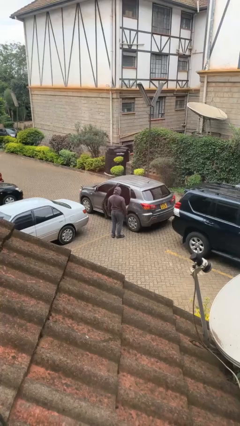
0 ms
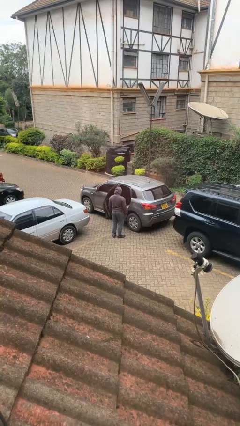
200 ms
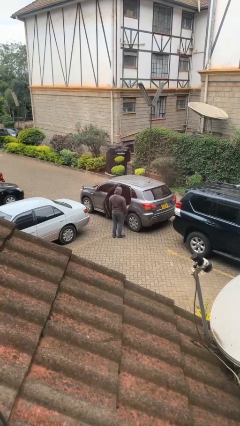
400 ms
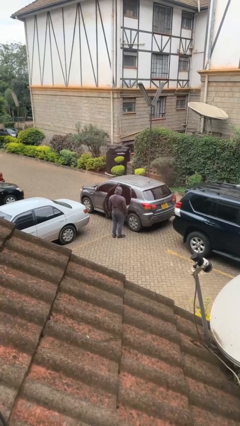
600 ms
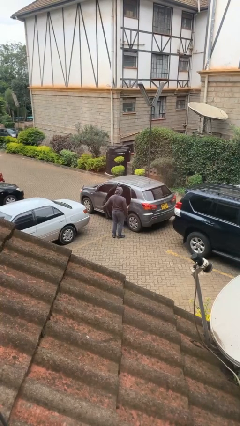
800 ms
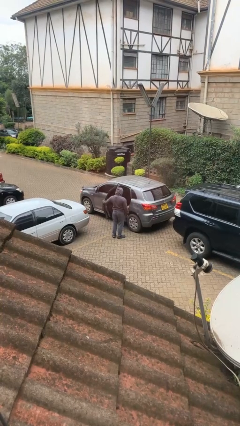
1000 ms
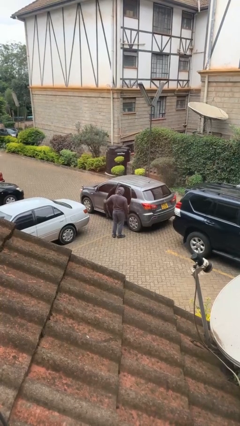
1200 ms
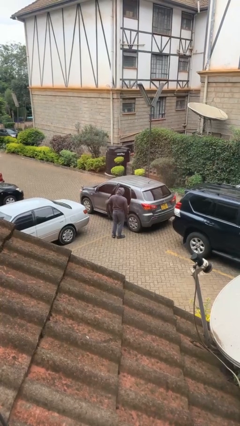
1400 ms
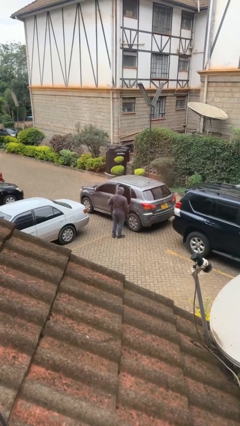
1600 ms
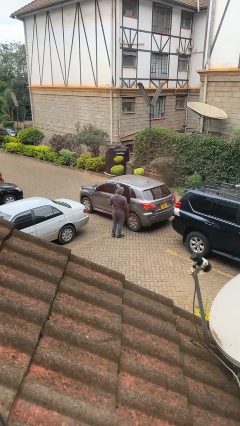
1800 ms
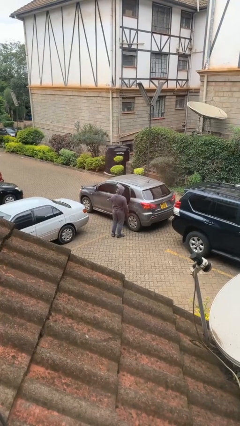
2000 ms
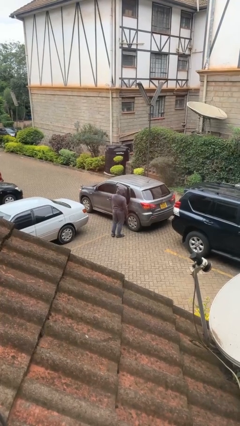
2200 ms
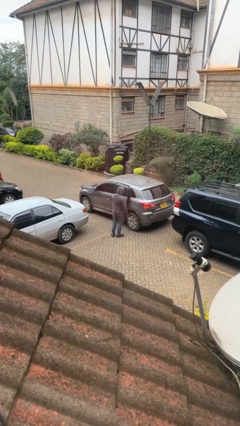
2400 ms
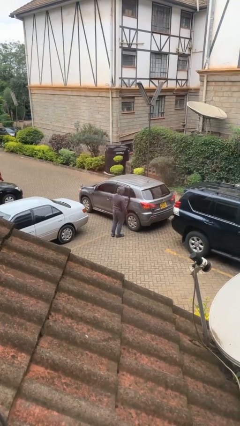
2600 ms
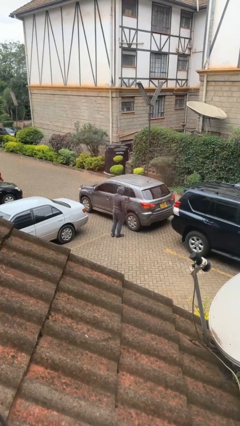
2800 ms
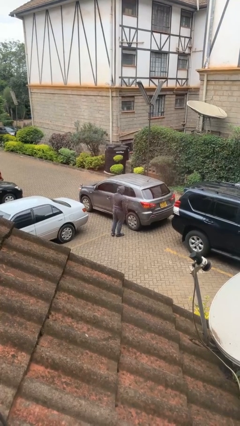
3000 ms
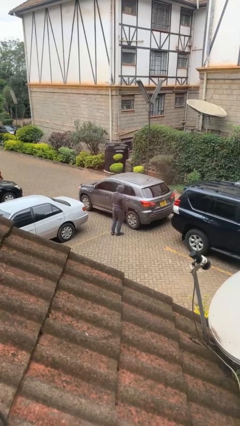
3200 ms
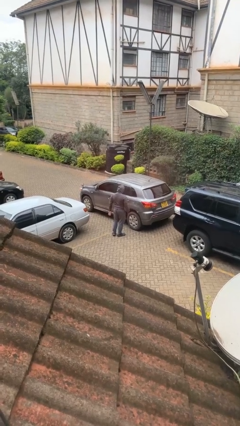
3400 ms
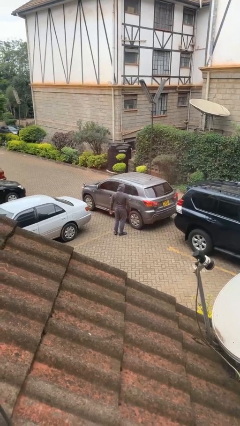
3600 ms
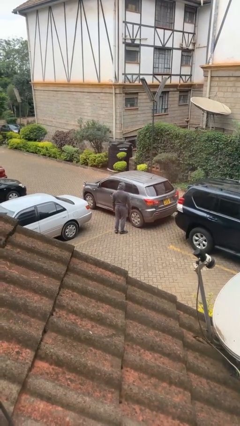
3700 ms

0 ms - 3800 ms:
person closes car door

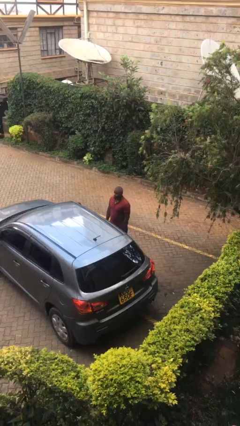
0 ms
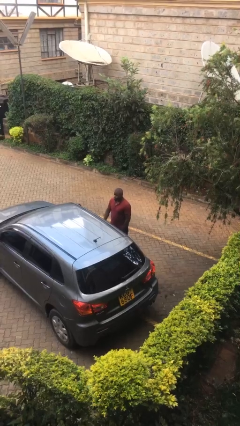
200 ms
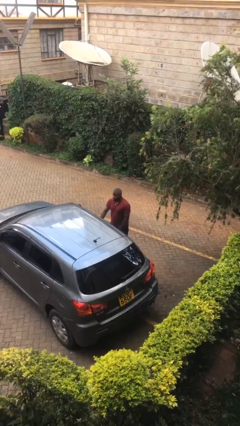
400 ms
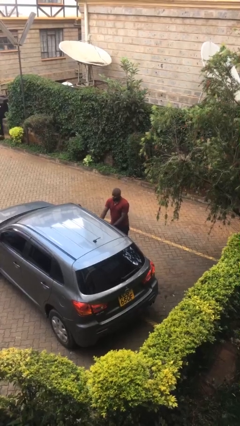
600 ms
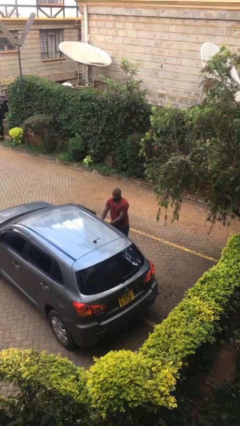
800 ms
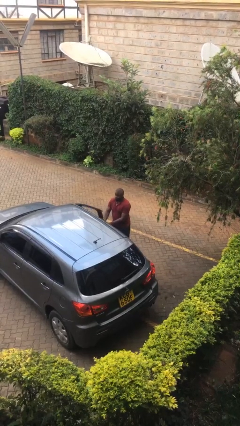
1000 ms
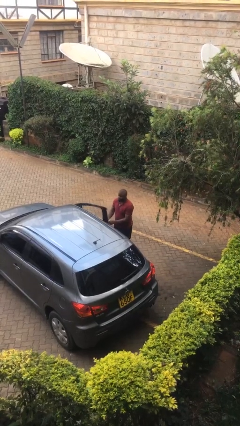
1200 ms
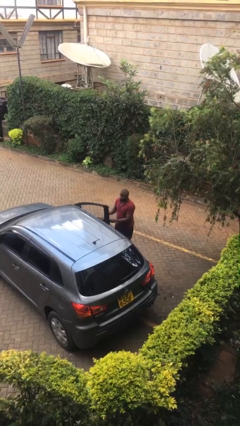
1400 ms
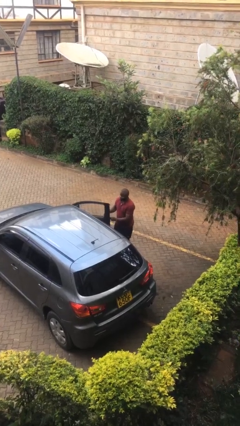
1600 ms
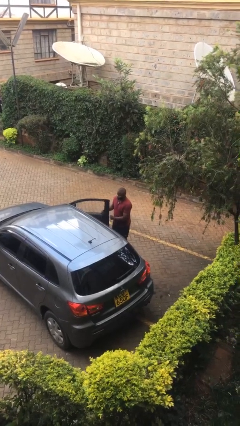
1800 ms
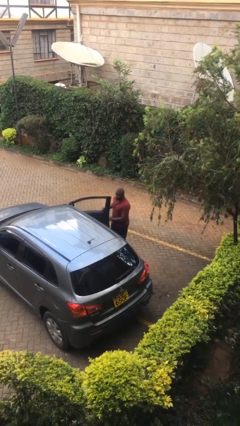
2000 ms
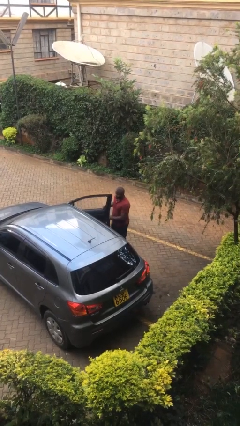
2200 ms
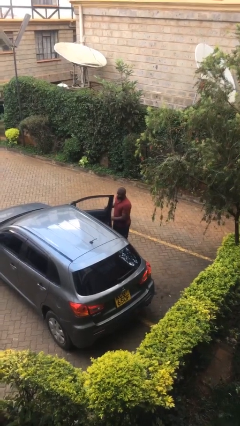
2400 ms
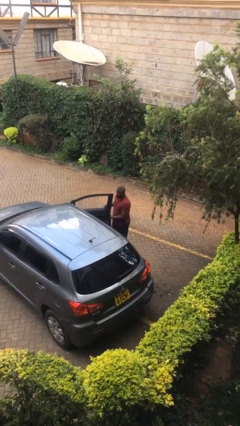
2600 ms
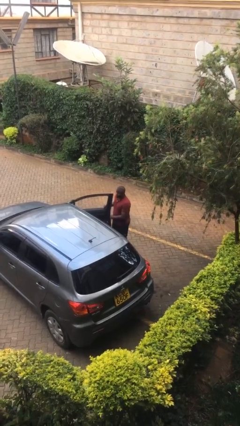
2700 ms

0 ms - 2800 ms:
person opens car door

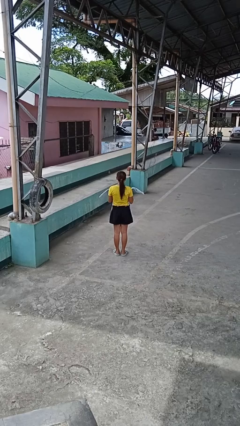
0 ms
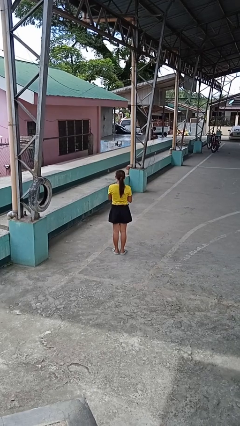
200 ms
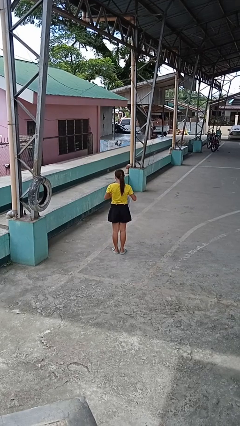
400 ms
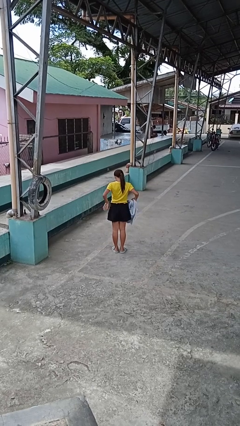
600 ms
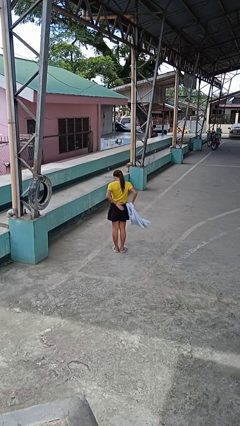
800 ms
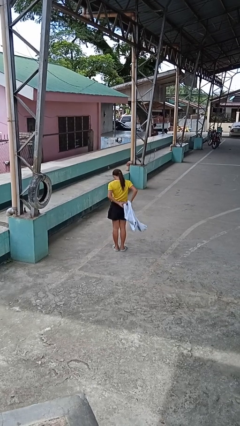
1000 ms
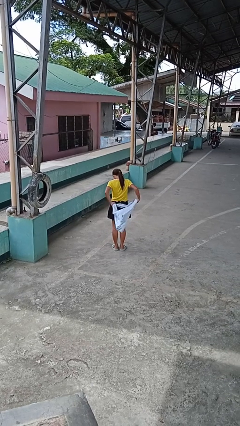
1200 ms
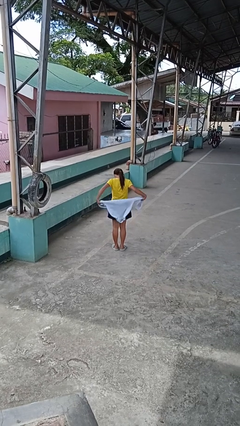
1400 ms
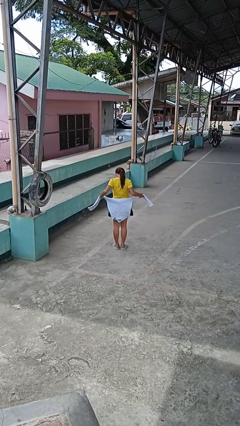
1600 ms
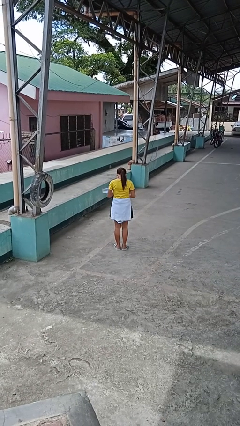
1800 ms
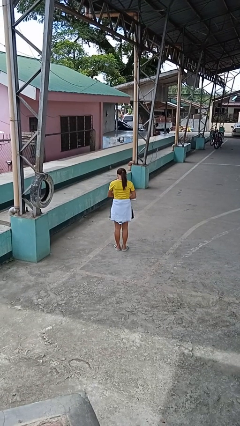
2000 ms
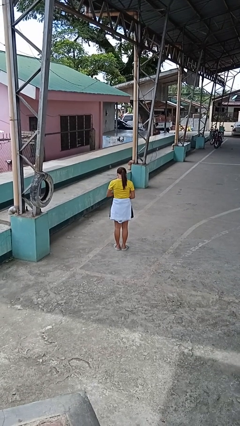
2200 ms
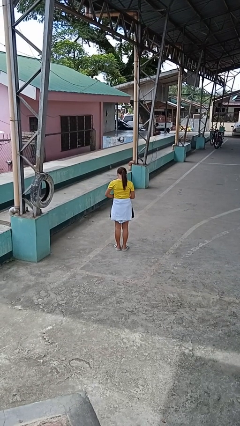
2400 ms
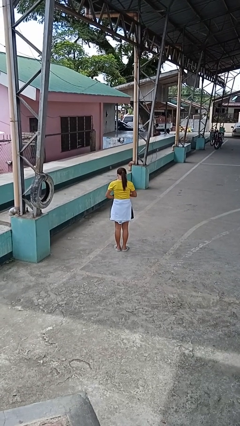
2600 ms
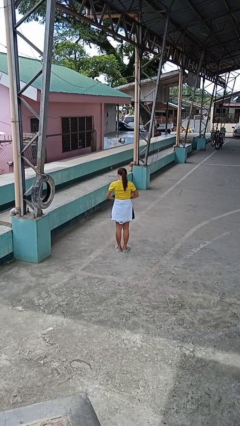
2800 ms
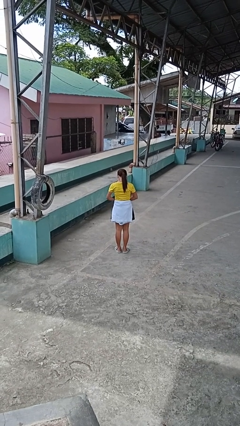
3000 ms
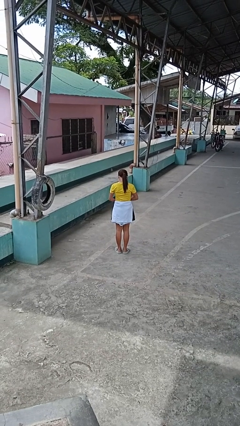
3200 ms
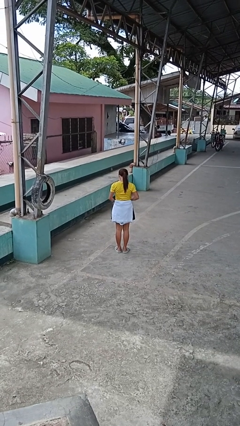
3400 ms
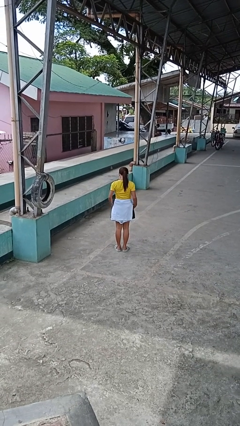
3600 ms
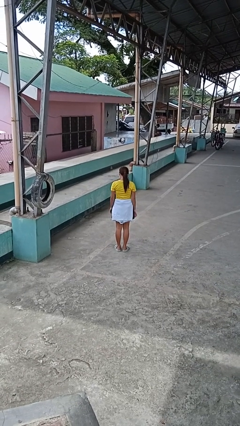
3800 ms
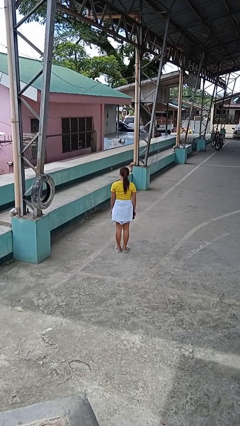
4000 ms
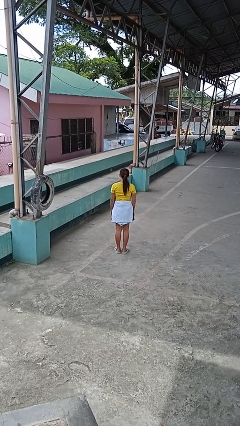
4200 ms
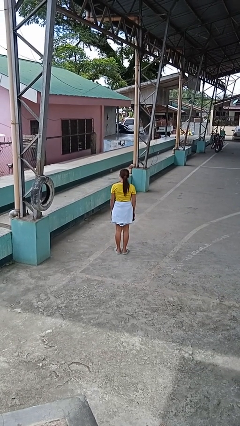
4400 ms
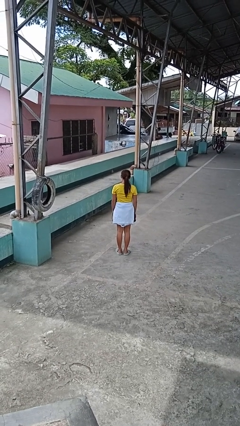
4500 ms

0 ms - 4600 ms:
person ties jacket around waist

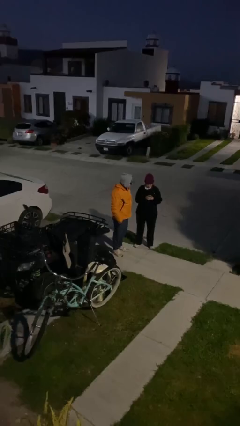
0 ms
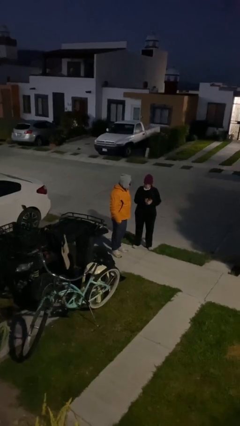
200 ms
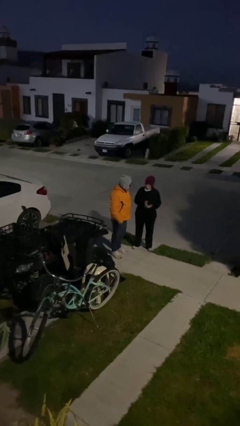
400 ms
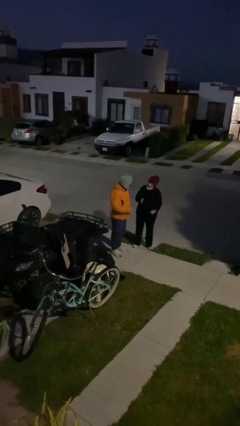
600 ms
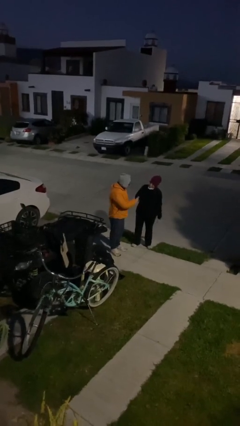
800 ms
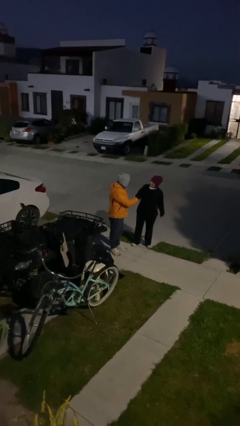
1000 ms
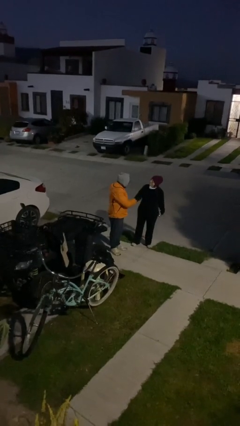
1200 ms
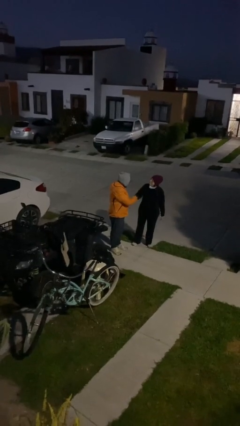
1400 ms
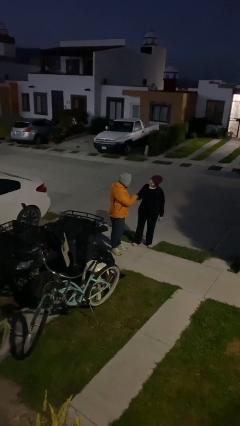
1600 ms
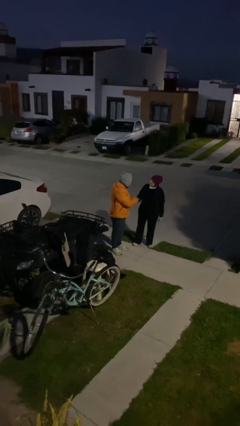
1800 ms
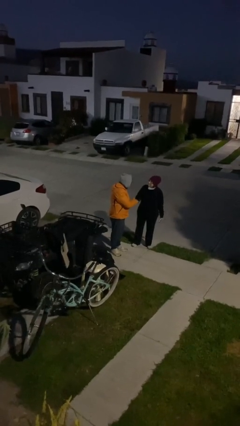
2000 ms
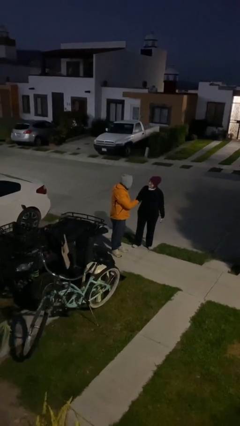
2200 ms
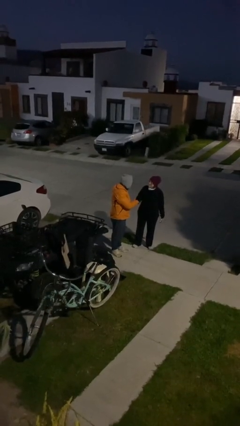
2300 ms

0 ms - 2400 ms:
person shakes hand

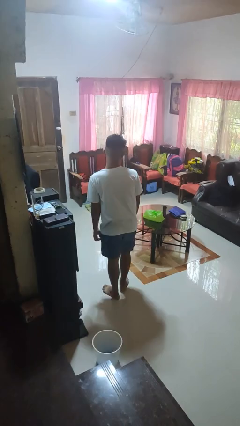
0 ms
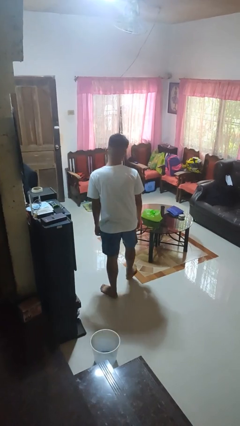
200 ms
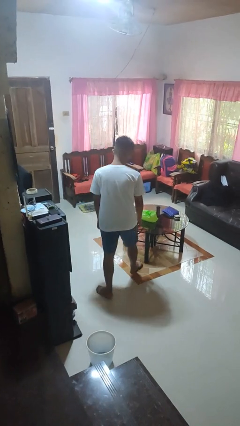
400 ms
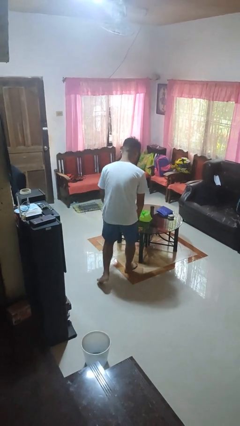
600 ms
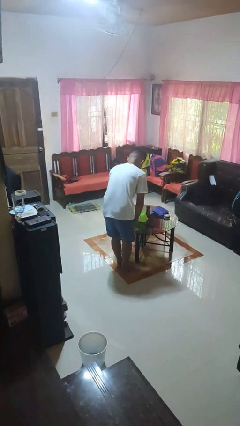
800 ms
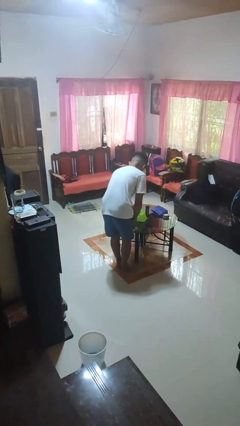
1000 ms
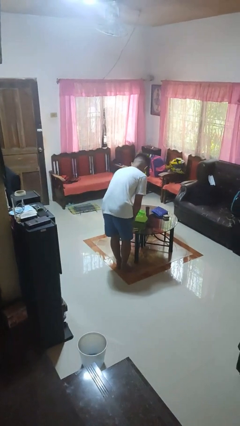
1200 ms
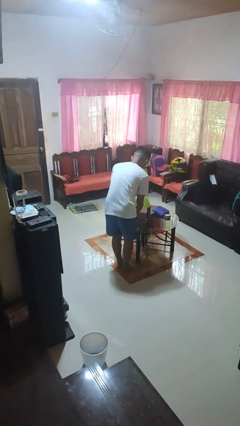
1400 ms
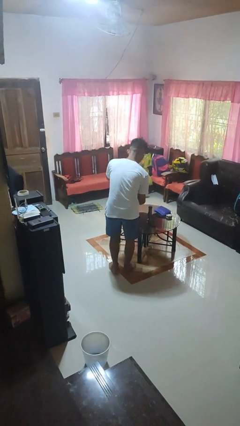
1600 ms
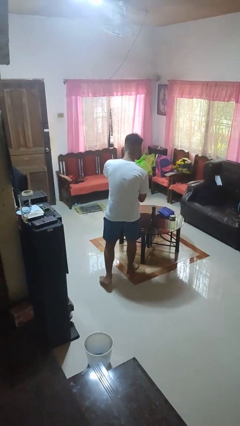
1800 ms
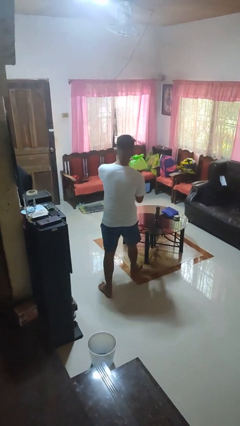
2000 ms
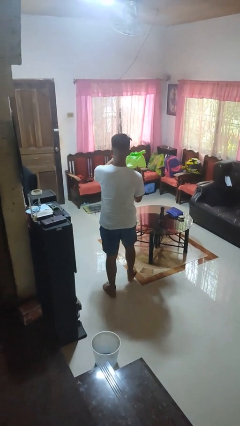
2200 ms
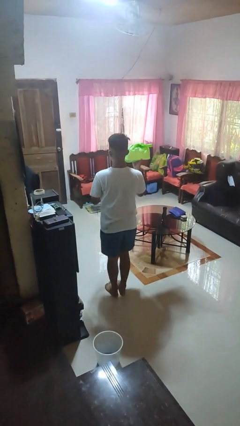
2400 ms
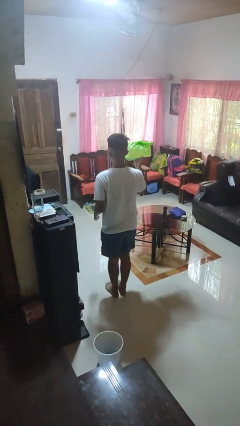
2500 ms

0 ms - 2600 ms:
person picks up object from table

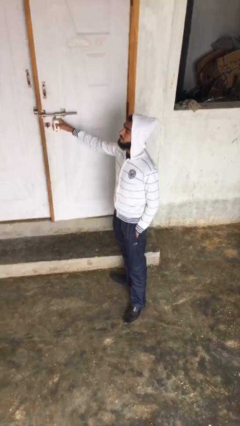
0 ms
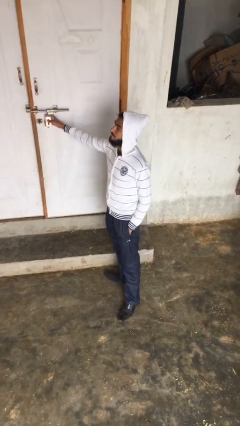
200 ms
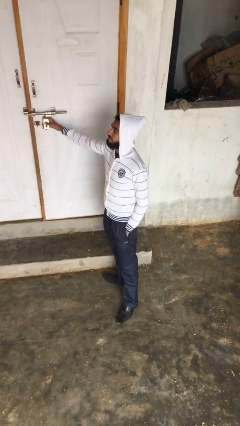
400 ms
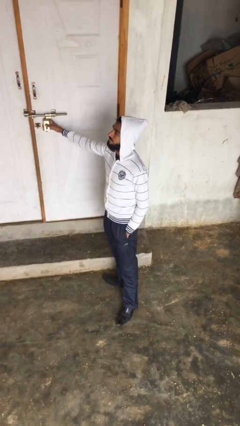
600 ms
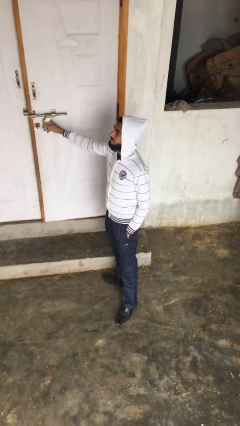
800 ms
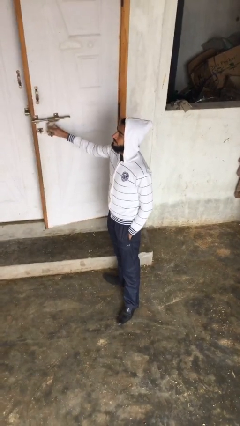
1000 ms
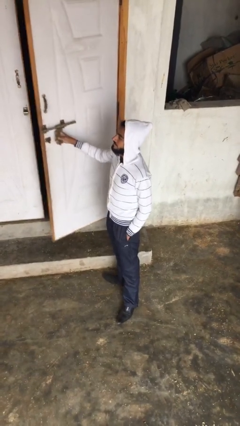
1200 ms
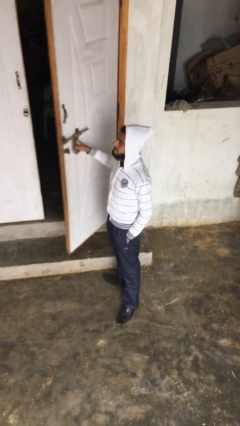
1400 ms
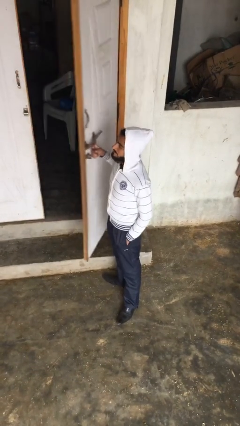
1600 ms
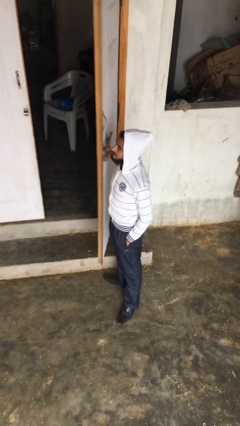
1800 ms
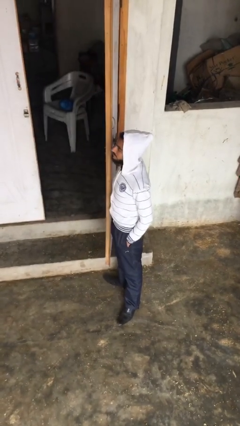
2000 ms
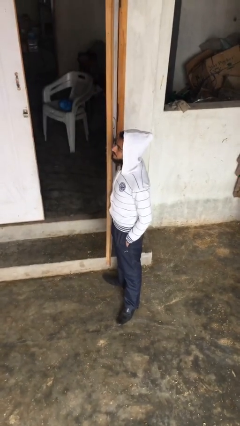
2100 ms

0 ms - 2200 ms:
person opens facility door
